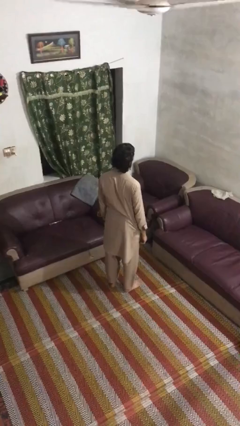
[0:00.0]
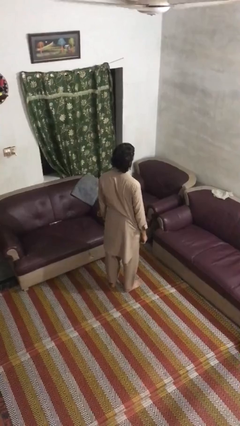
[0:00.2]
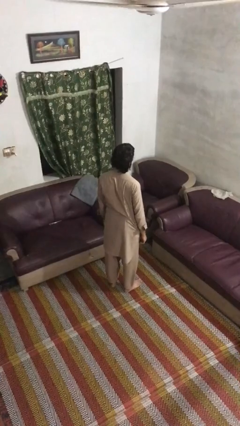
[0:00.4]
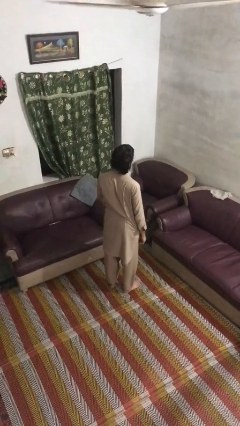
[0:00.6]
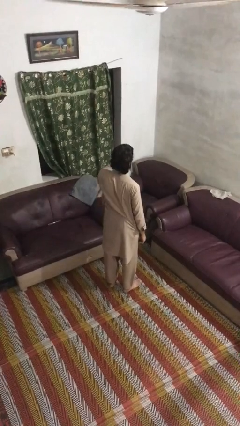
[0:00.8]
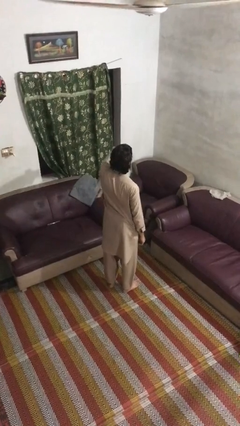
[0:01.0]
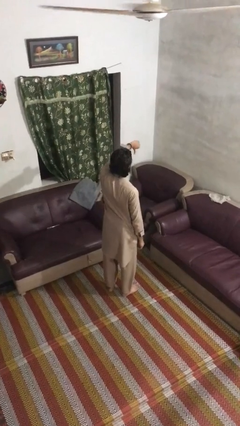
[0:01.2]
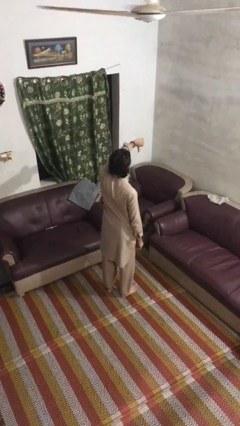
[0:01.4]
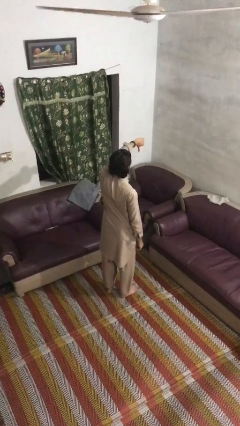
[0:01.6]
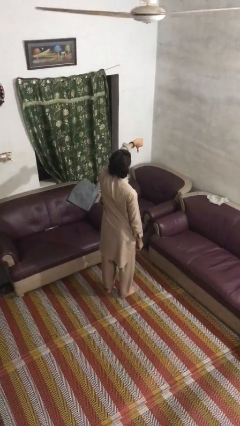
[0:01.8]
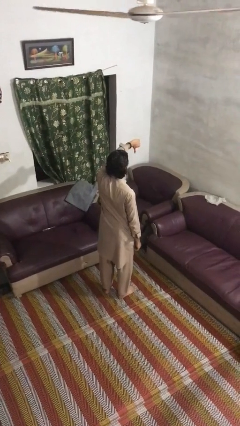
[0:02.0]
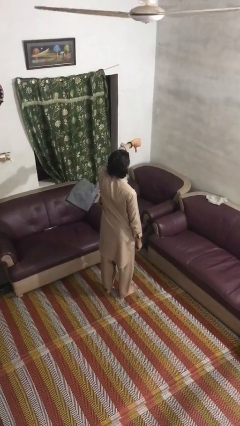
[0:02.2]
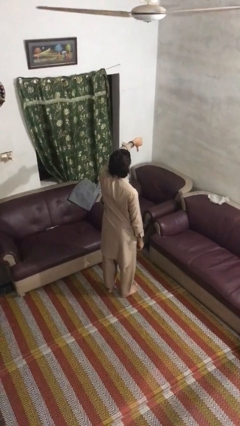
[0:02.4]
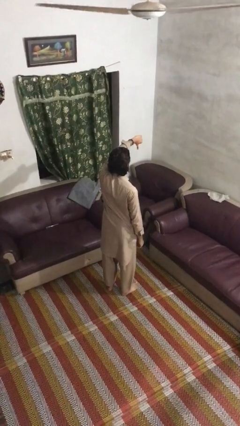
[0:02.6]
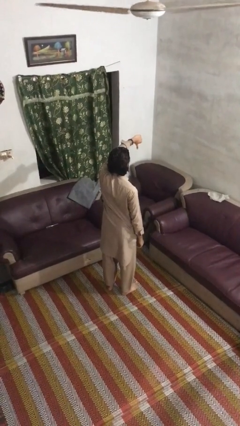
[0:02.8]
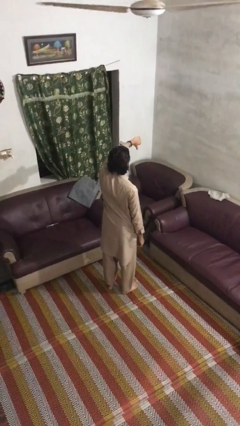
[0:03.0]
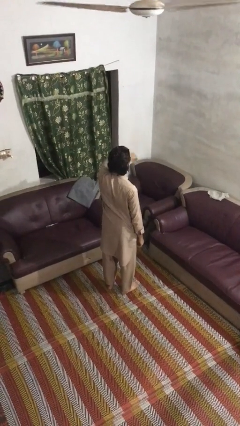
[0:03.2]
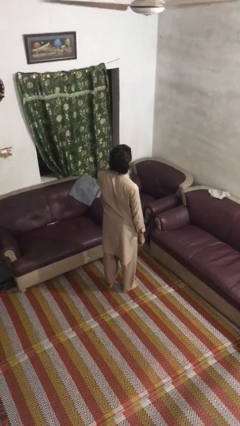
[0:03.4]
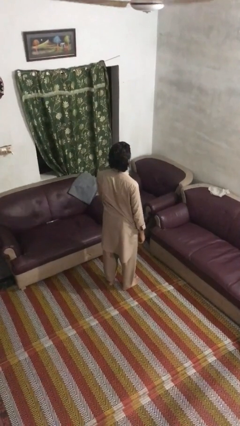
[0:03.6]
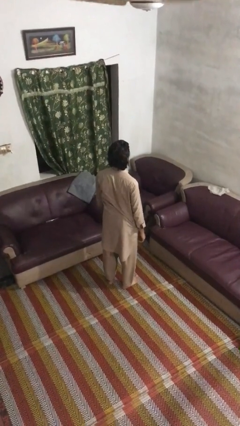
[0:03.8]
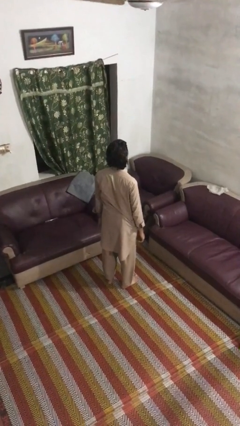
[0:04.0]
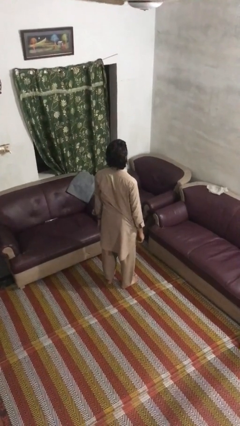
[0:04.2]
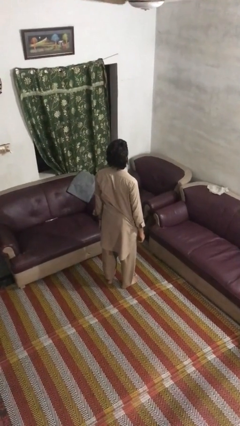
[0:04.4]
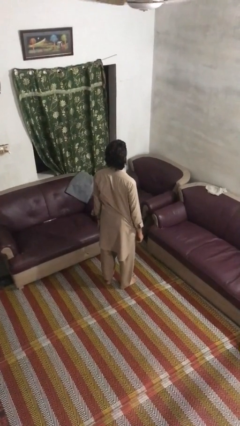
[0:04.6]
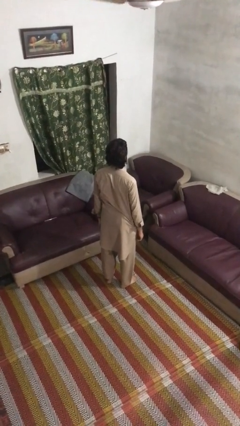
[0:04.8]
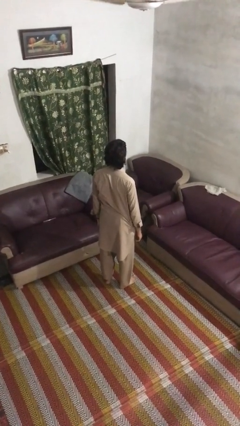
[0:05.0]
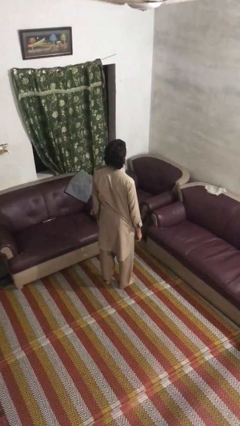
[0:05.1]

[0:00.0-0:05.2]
person gestures thumbs down

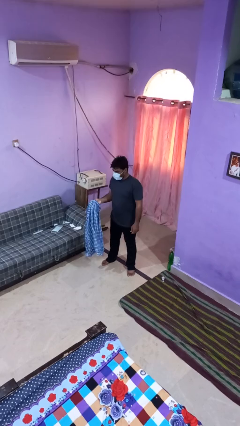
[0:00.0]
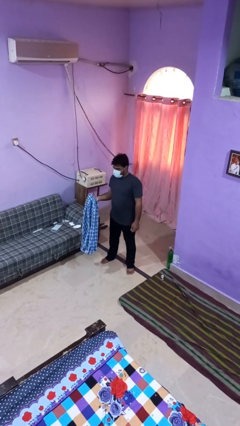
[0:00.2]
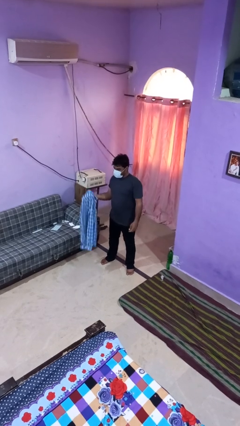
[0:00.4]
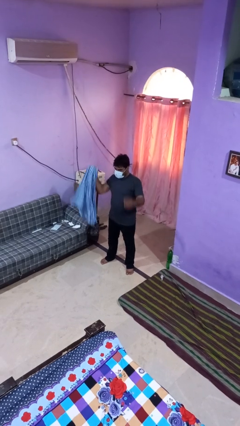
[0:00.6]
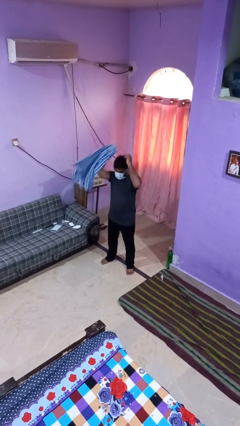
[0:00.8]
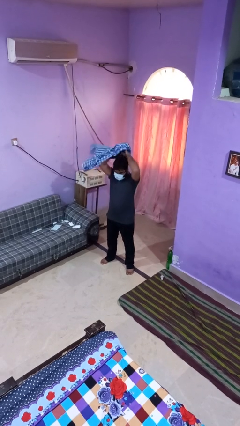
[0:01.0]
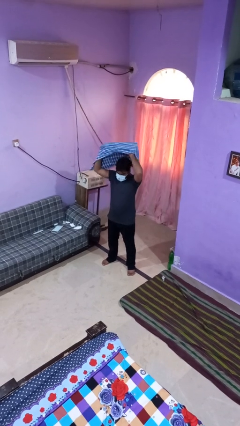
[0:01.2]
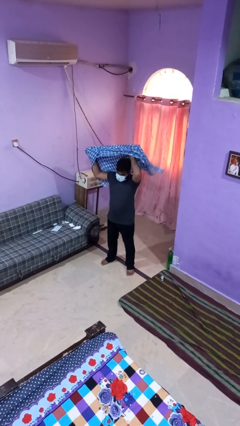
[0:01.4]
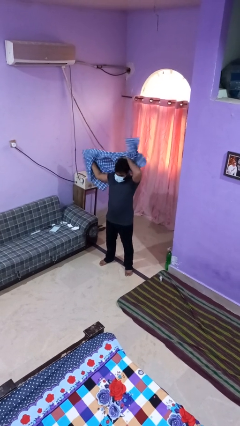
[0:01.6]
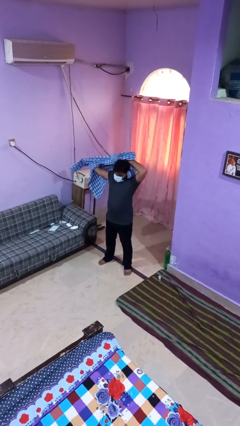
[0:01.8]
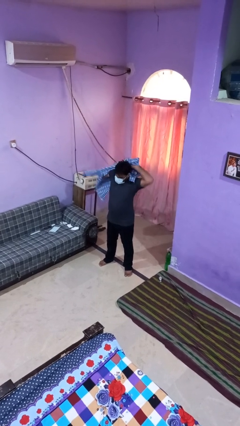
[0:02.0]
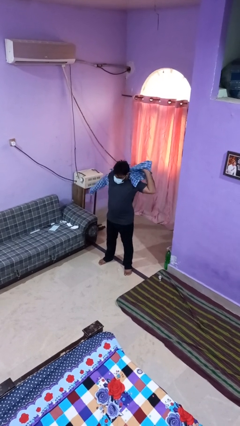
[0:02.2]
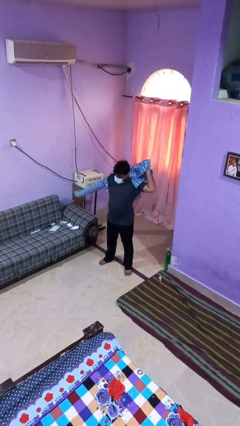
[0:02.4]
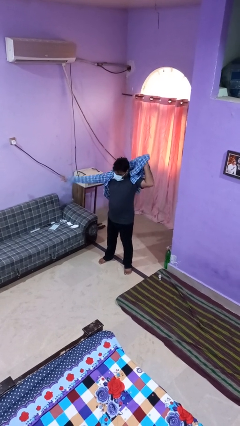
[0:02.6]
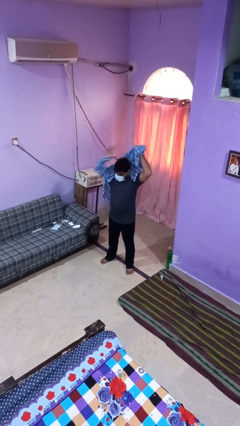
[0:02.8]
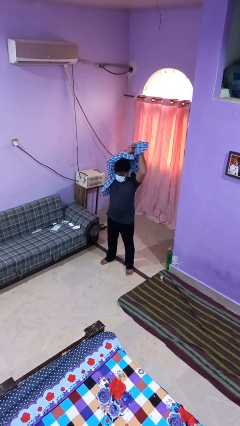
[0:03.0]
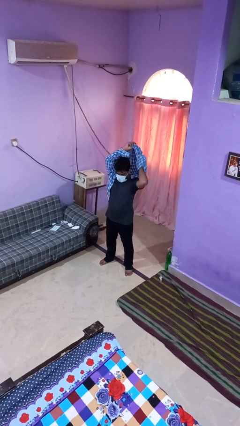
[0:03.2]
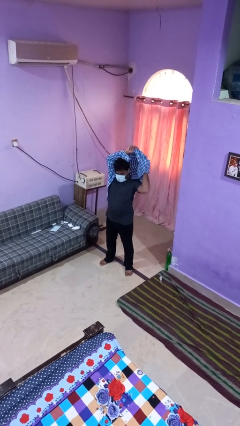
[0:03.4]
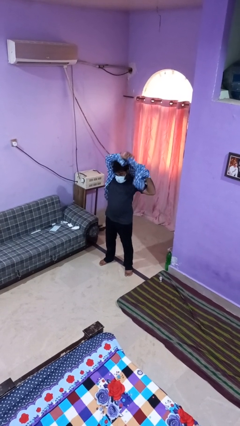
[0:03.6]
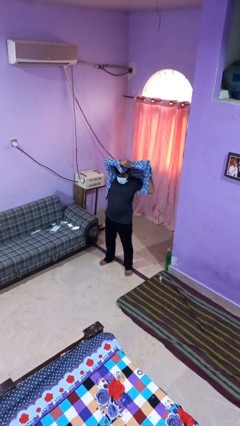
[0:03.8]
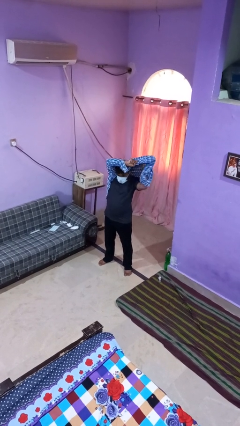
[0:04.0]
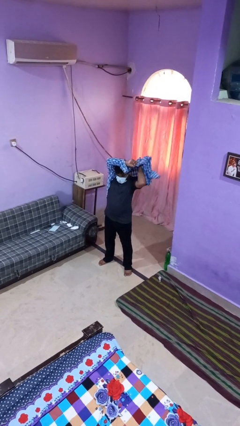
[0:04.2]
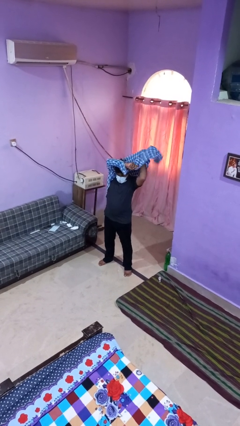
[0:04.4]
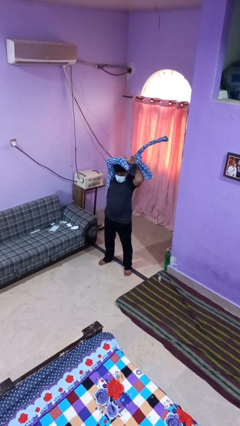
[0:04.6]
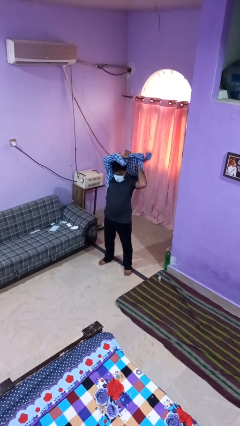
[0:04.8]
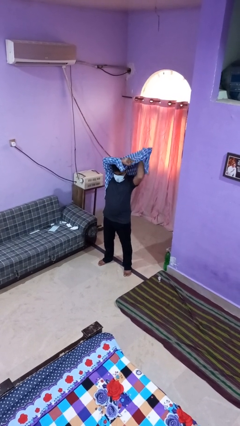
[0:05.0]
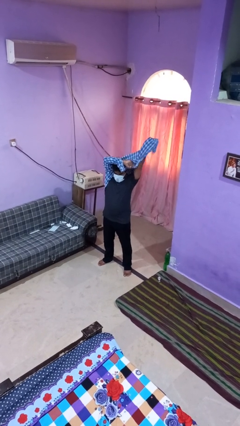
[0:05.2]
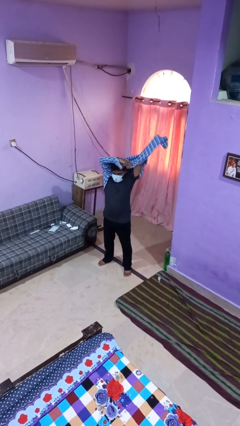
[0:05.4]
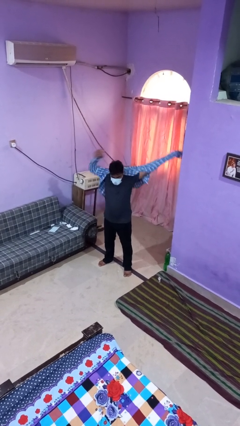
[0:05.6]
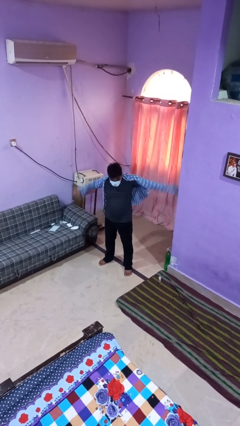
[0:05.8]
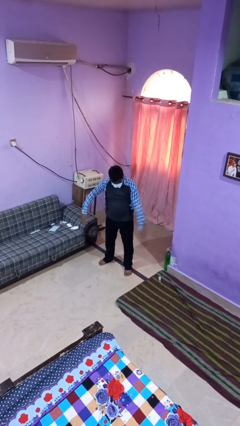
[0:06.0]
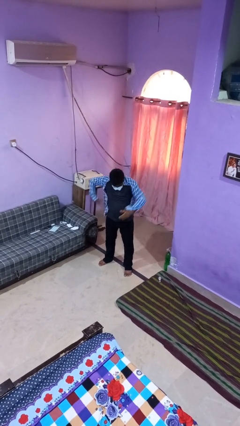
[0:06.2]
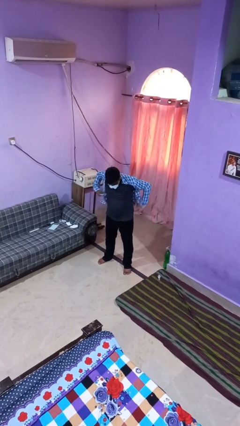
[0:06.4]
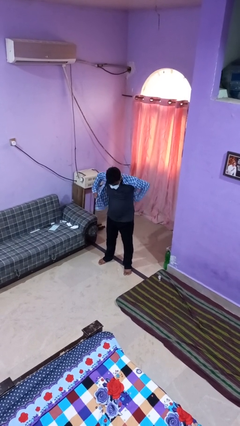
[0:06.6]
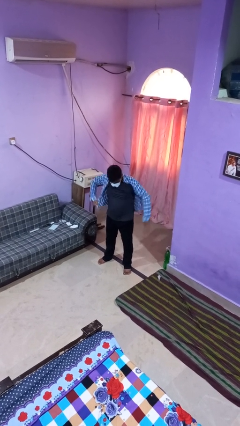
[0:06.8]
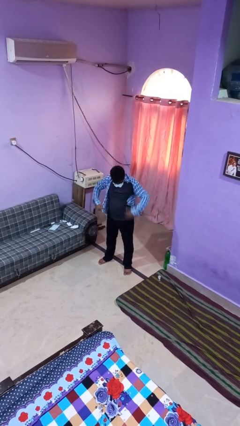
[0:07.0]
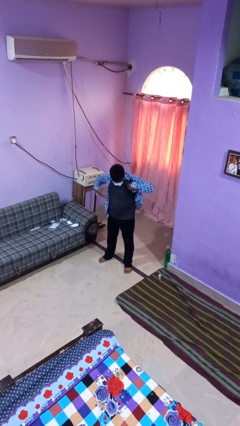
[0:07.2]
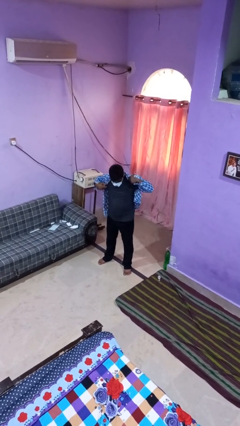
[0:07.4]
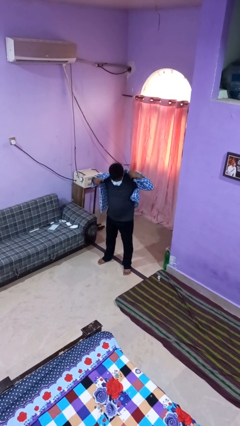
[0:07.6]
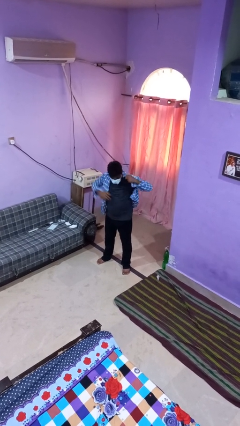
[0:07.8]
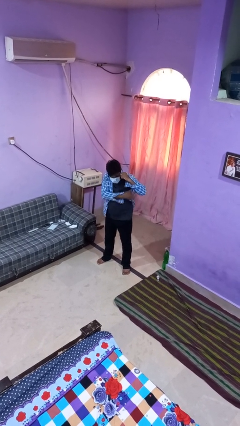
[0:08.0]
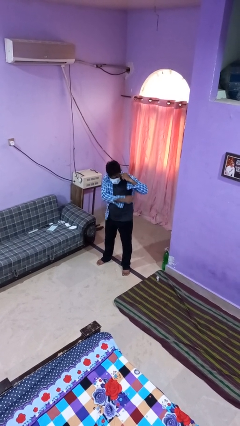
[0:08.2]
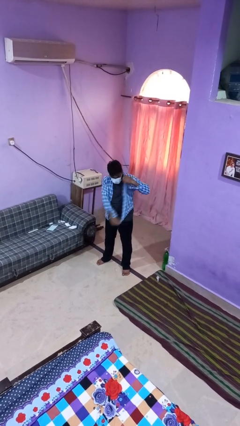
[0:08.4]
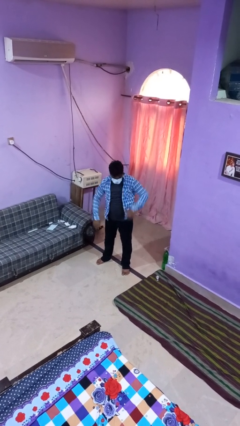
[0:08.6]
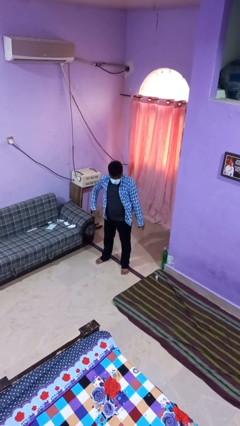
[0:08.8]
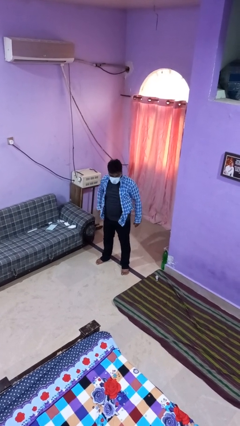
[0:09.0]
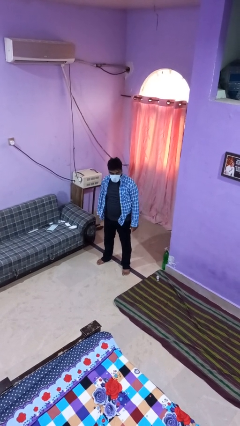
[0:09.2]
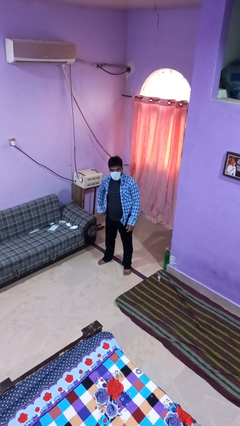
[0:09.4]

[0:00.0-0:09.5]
person puts on shirt

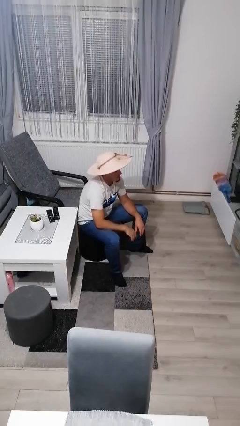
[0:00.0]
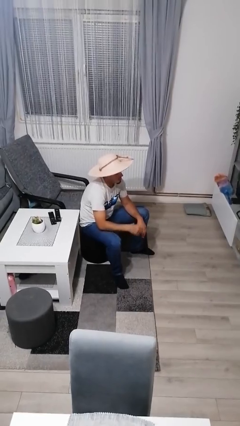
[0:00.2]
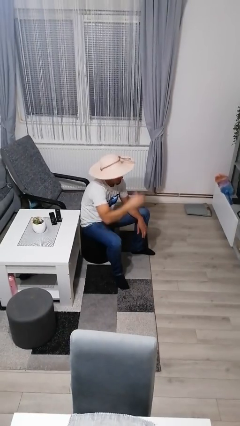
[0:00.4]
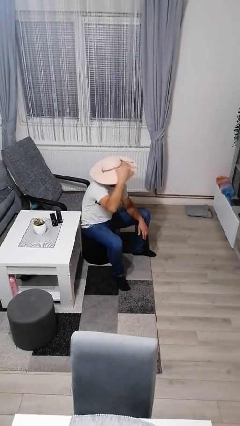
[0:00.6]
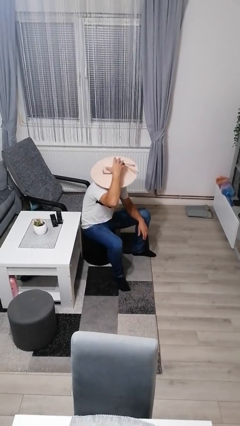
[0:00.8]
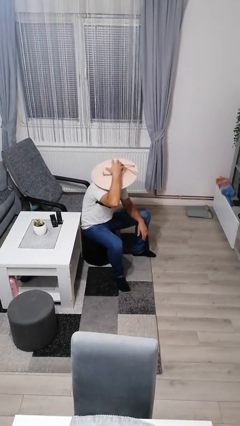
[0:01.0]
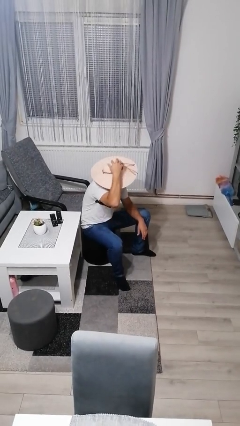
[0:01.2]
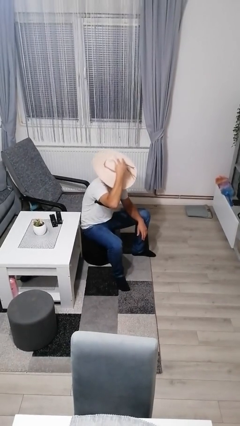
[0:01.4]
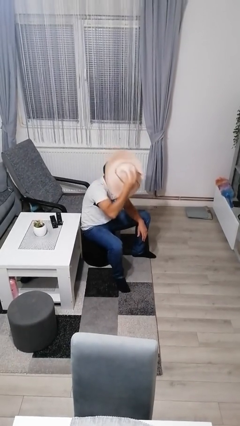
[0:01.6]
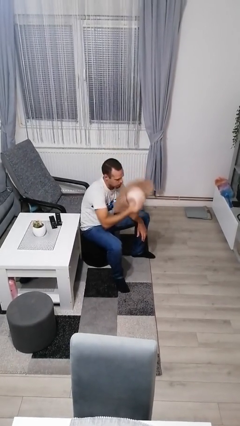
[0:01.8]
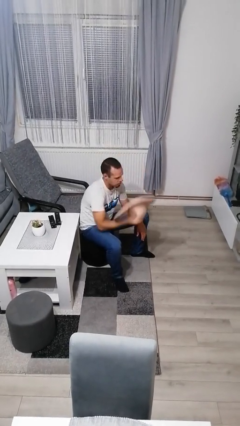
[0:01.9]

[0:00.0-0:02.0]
person takes off hat

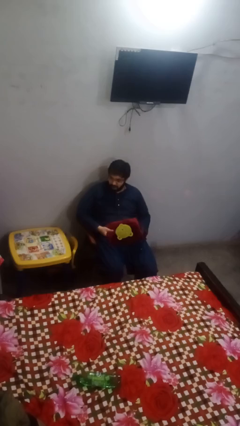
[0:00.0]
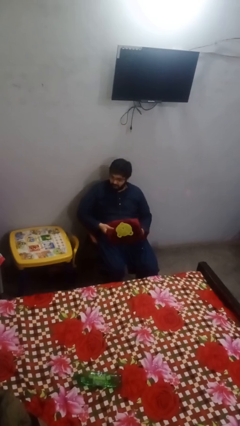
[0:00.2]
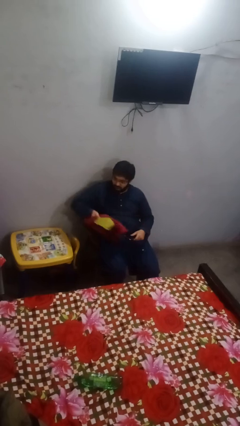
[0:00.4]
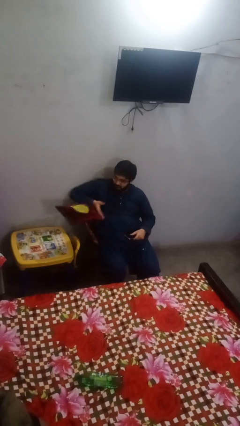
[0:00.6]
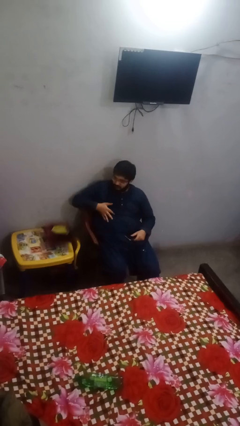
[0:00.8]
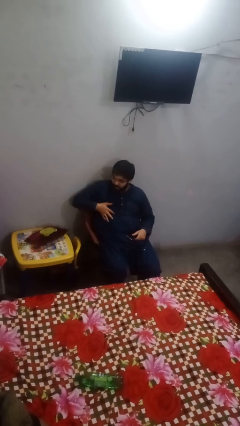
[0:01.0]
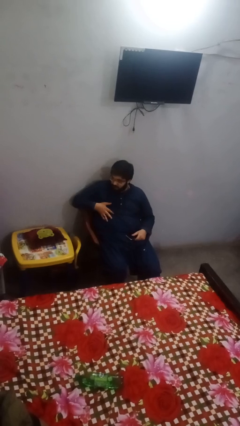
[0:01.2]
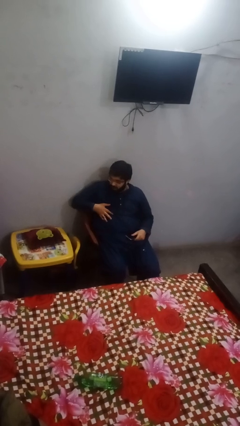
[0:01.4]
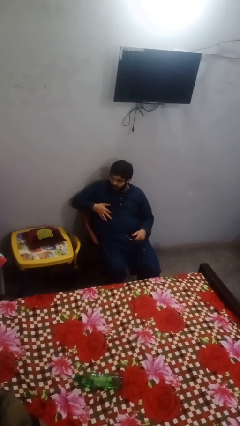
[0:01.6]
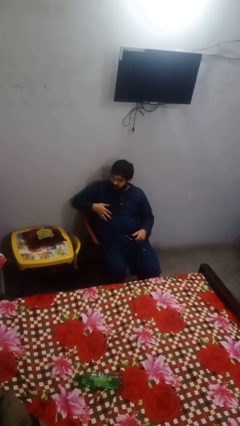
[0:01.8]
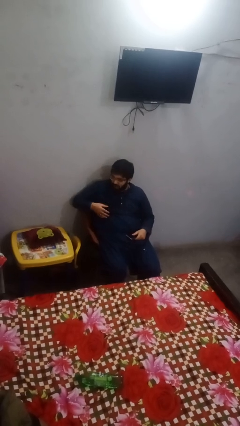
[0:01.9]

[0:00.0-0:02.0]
person throws object on table
